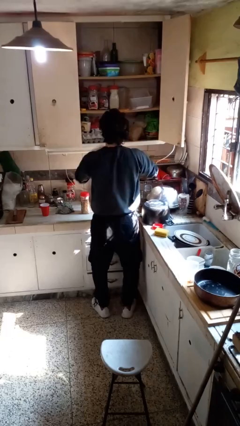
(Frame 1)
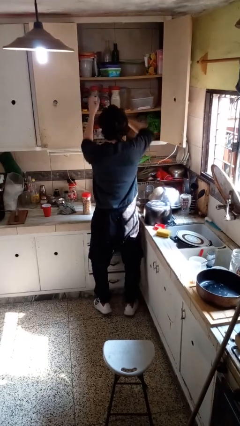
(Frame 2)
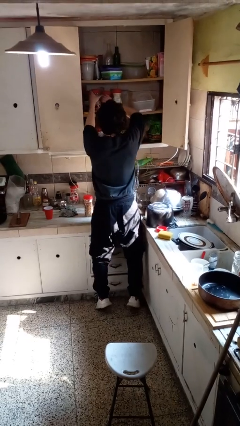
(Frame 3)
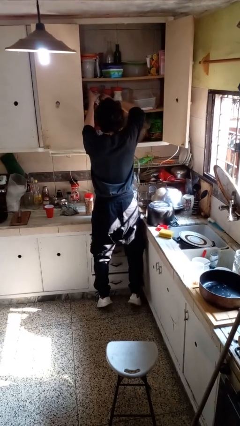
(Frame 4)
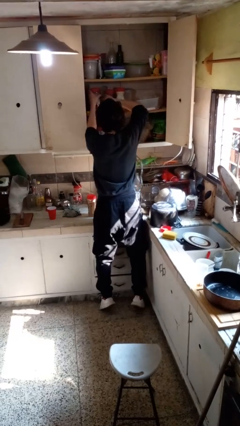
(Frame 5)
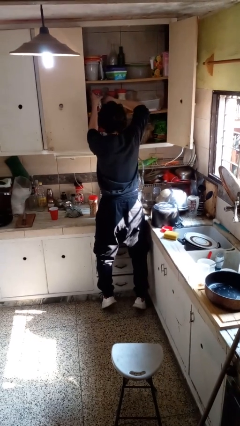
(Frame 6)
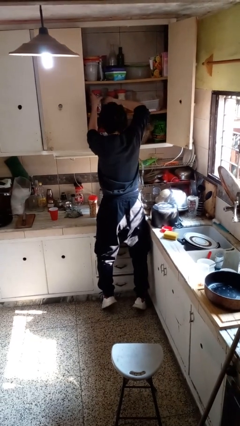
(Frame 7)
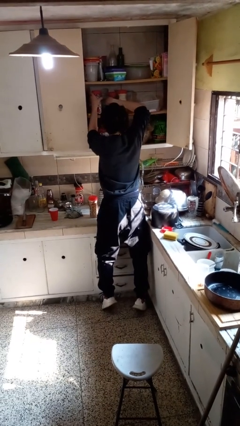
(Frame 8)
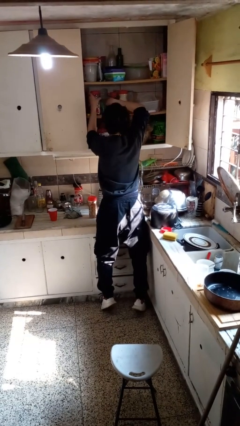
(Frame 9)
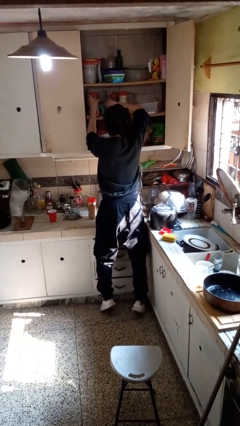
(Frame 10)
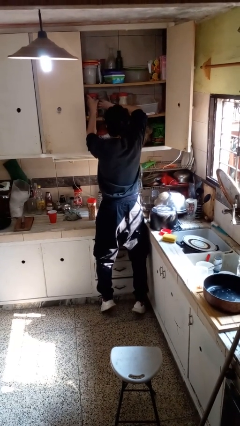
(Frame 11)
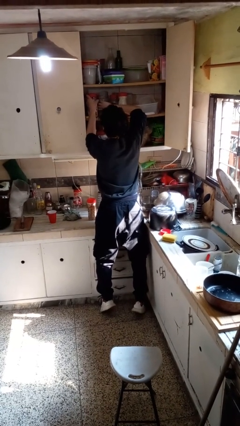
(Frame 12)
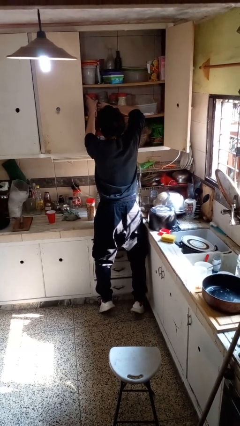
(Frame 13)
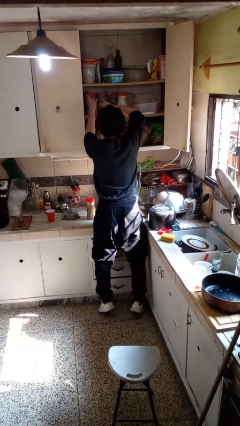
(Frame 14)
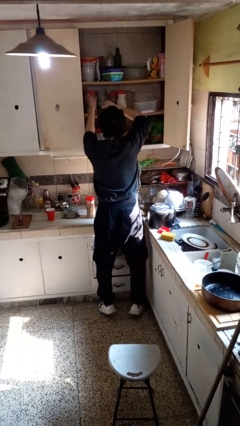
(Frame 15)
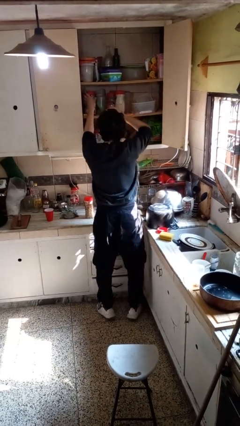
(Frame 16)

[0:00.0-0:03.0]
person searches in cabinet

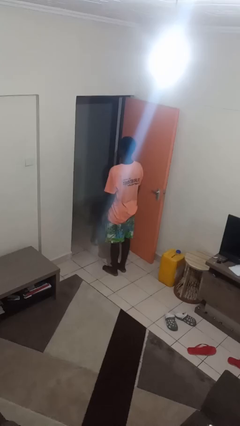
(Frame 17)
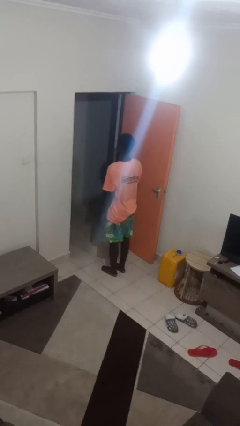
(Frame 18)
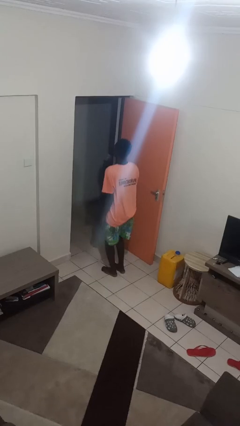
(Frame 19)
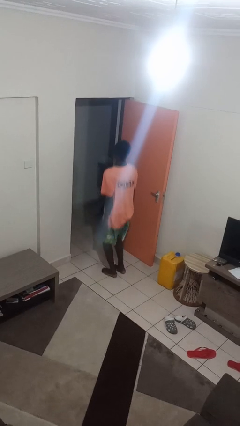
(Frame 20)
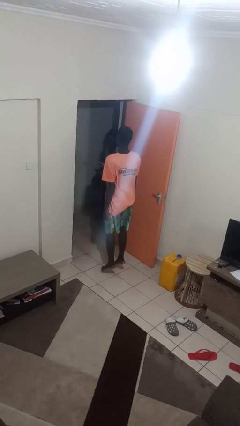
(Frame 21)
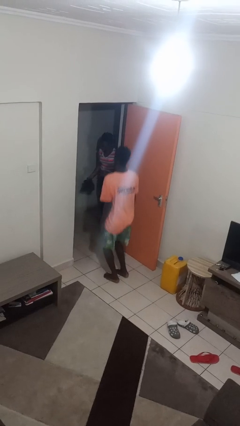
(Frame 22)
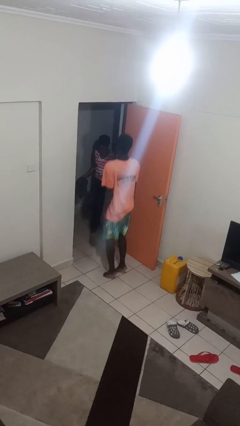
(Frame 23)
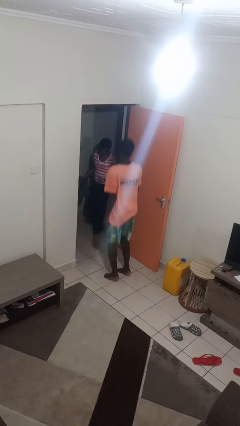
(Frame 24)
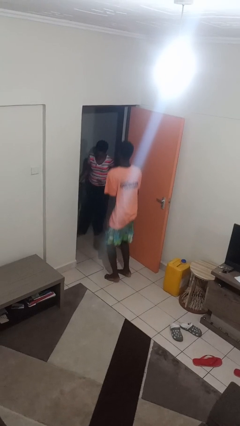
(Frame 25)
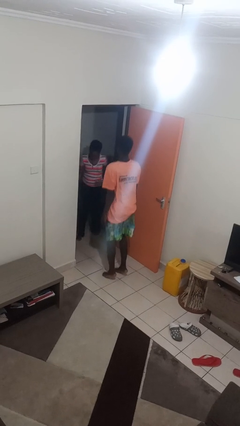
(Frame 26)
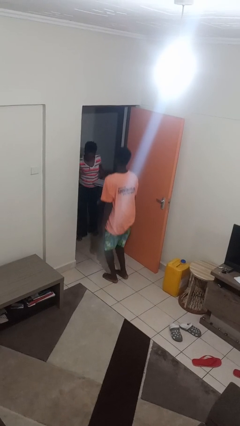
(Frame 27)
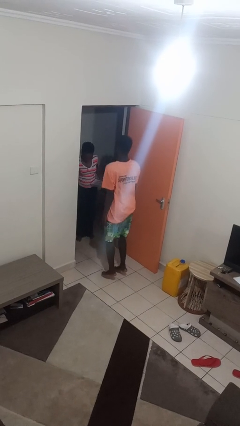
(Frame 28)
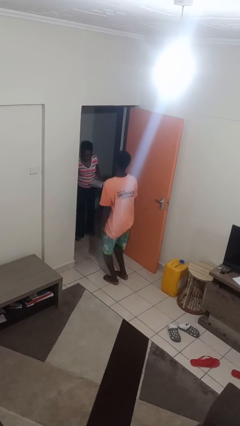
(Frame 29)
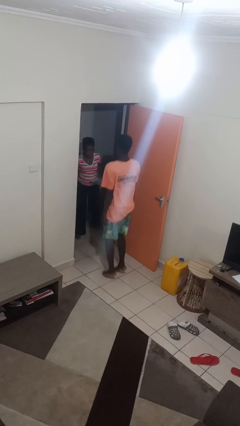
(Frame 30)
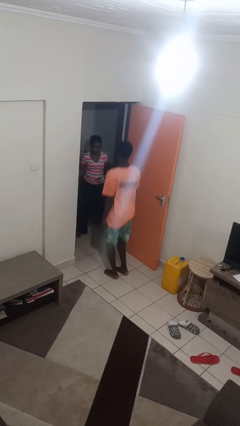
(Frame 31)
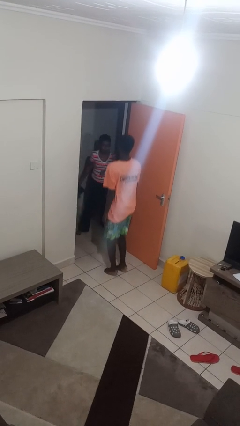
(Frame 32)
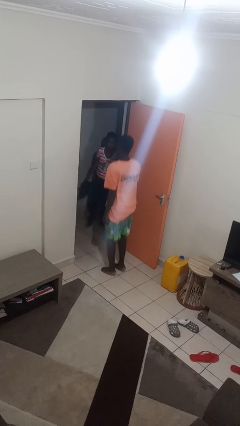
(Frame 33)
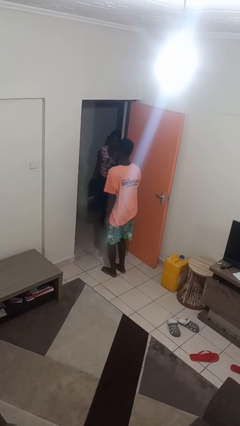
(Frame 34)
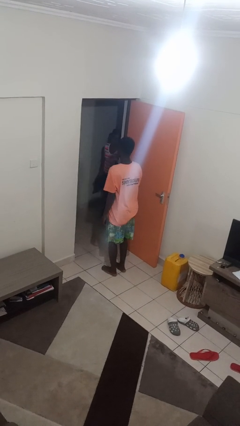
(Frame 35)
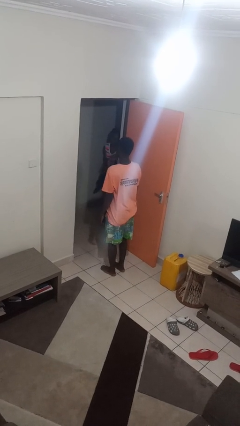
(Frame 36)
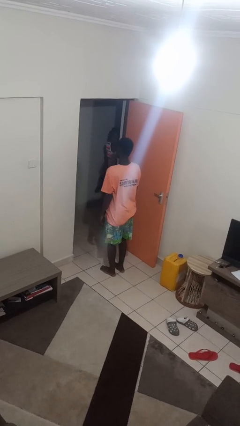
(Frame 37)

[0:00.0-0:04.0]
person jumps

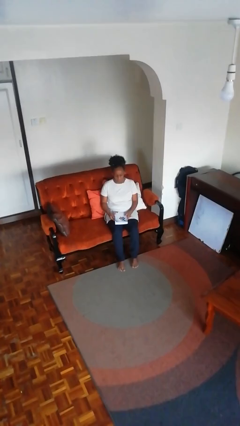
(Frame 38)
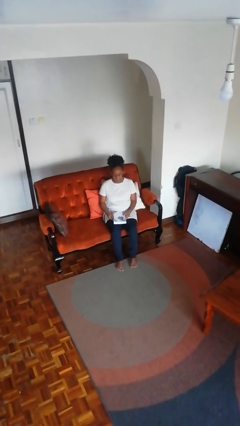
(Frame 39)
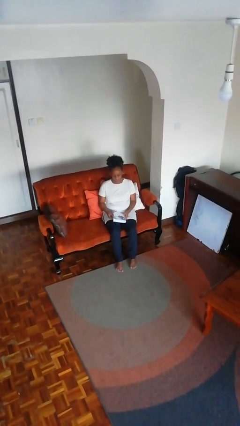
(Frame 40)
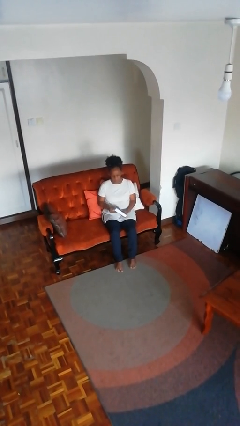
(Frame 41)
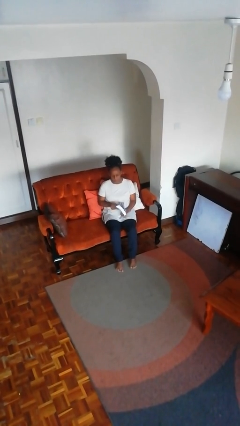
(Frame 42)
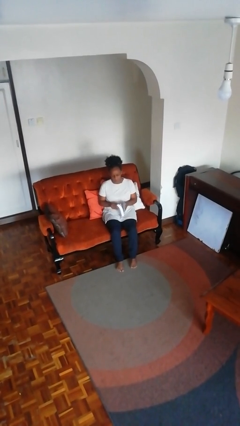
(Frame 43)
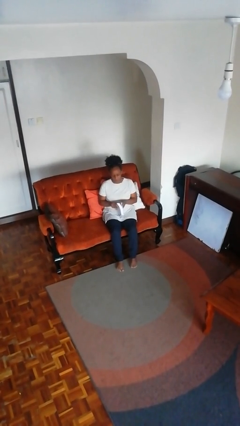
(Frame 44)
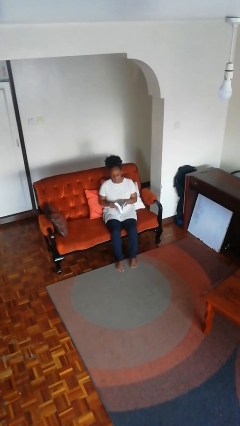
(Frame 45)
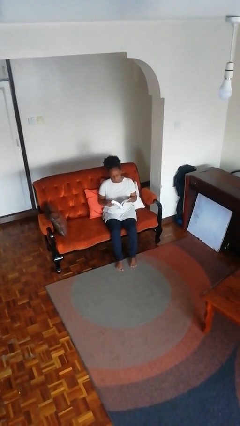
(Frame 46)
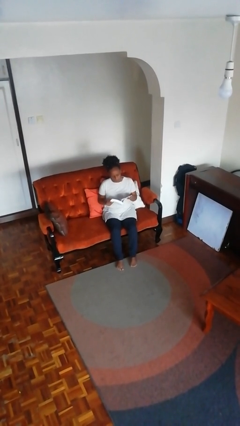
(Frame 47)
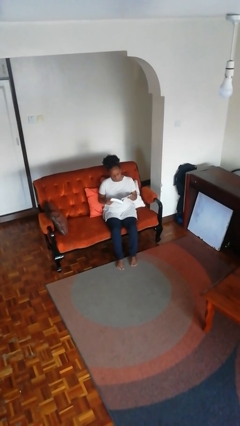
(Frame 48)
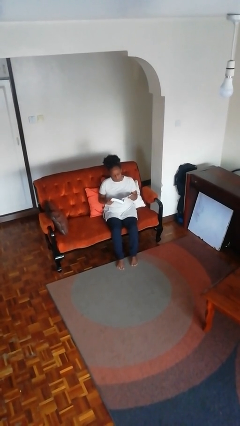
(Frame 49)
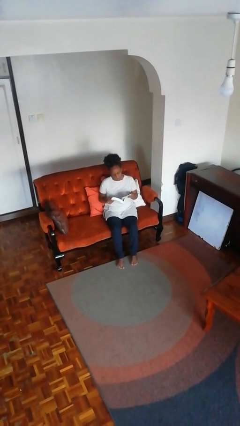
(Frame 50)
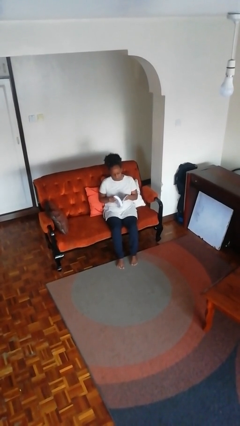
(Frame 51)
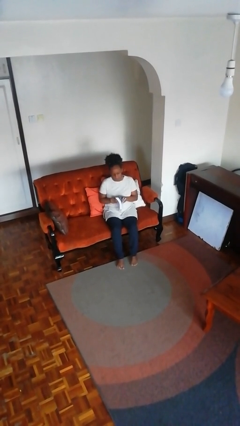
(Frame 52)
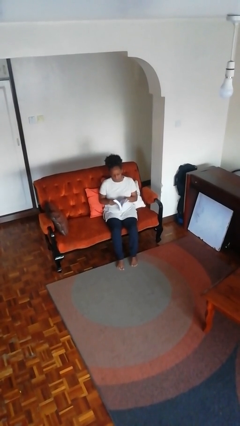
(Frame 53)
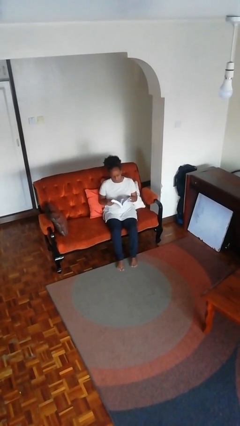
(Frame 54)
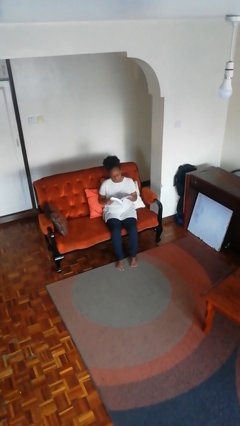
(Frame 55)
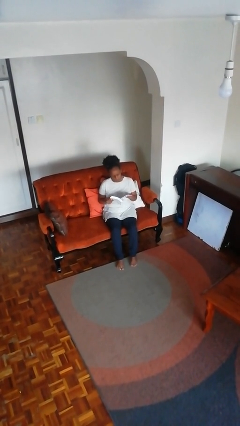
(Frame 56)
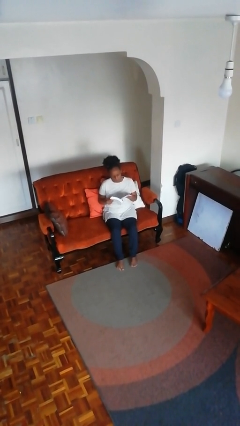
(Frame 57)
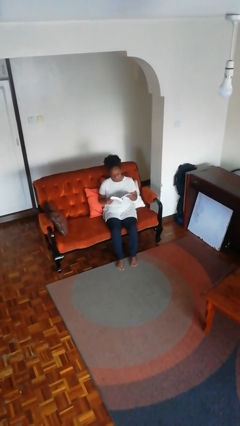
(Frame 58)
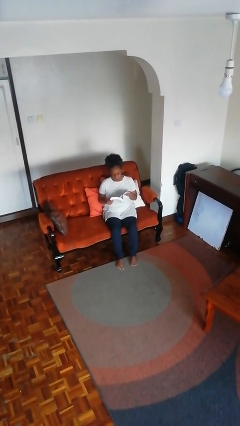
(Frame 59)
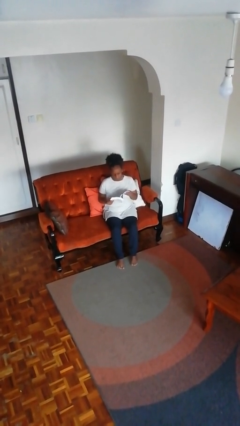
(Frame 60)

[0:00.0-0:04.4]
person reads book

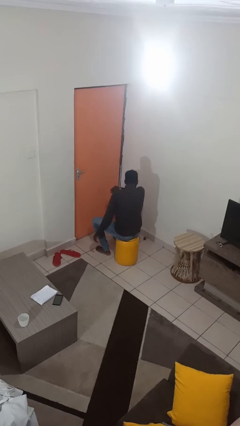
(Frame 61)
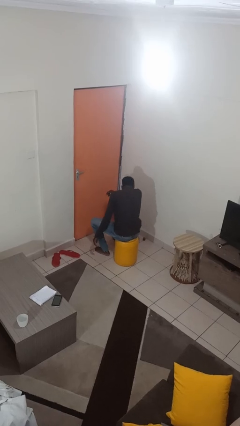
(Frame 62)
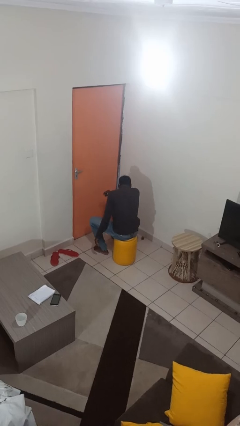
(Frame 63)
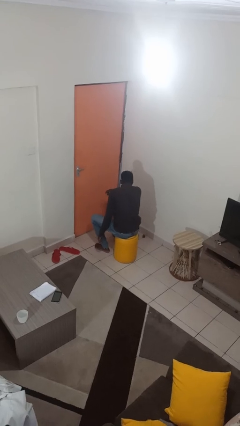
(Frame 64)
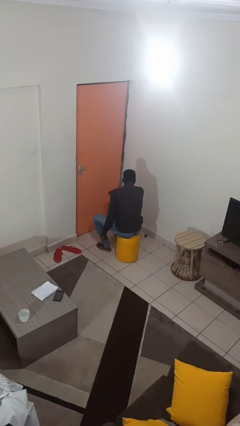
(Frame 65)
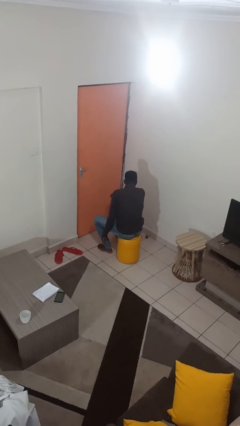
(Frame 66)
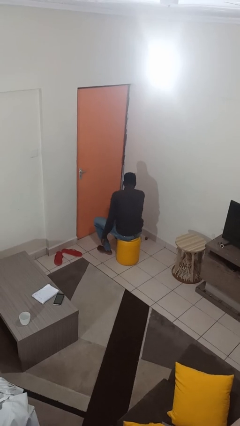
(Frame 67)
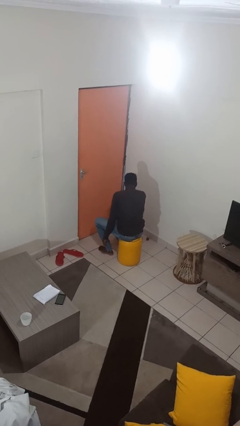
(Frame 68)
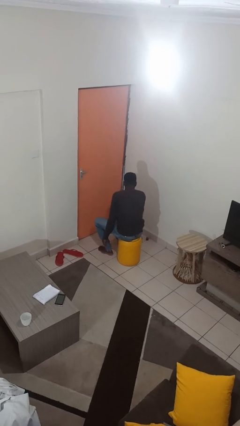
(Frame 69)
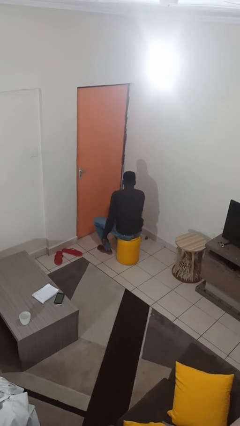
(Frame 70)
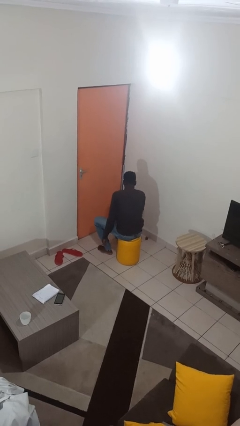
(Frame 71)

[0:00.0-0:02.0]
person sneezes into arm

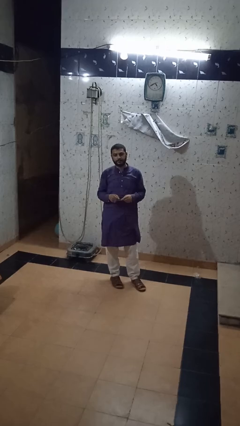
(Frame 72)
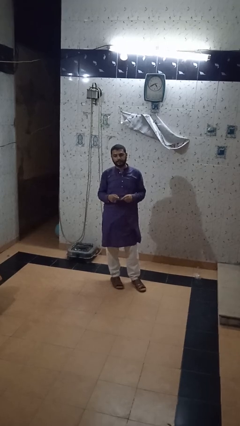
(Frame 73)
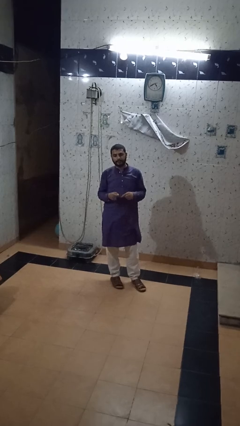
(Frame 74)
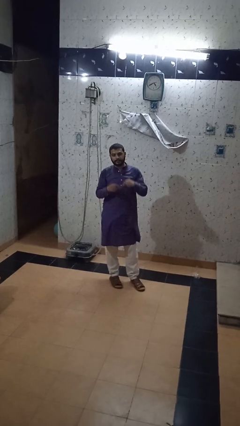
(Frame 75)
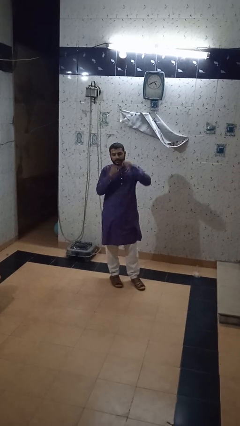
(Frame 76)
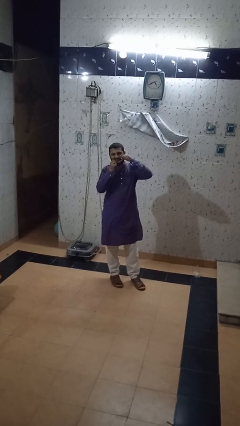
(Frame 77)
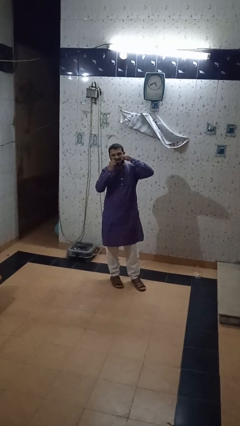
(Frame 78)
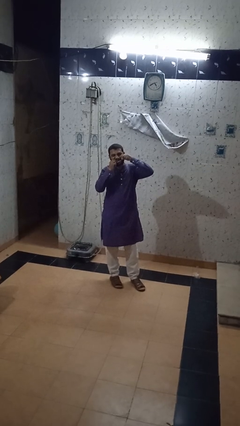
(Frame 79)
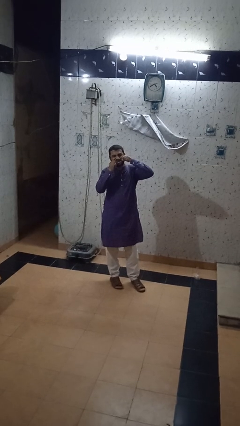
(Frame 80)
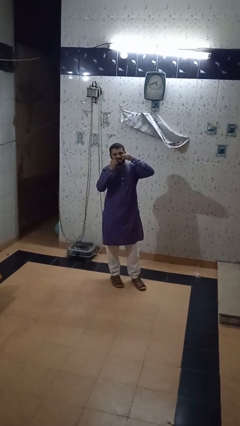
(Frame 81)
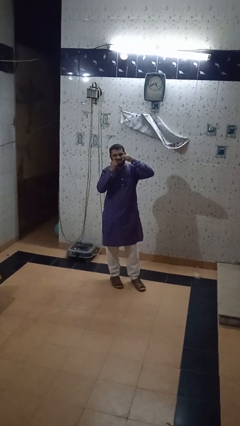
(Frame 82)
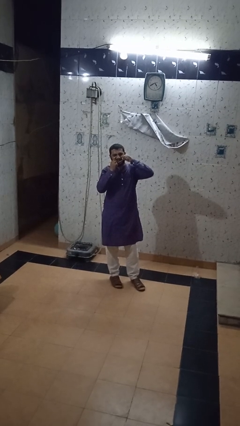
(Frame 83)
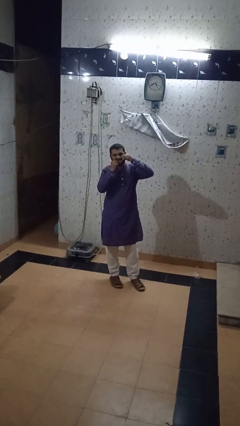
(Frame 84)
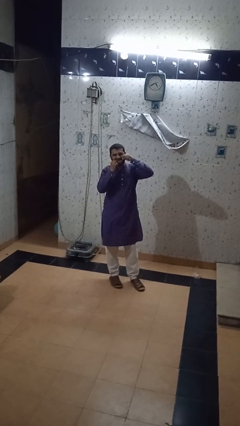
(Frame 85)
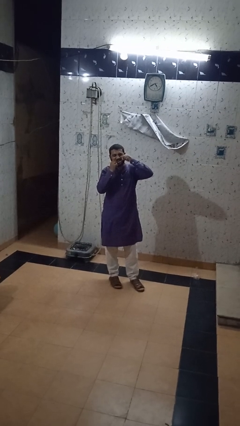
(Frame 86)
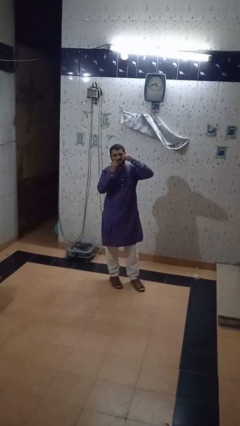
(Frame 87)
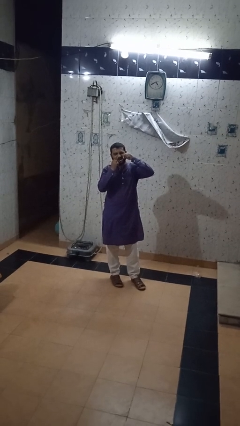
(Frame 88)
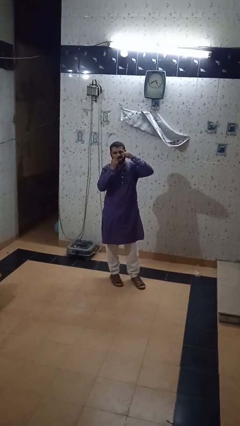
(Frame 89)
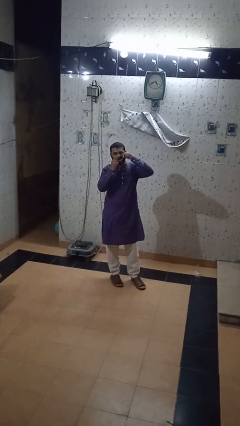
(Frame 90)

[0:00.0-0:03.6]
person flosses

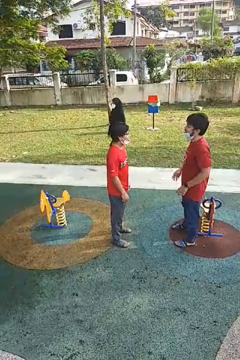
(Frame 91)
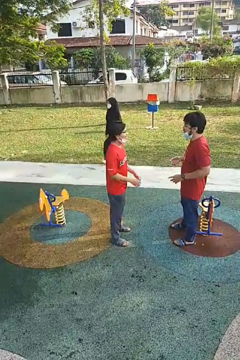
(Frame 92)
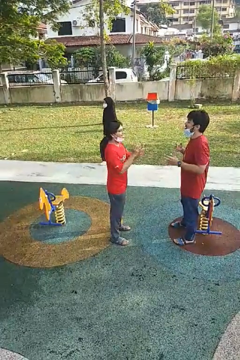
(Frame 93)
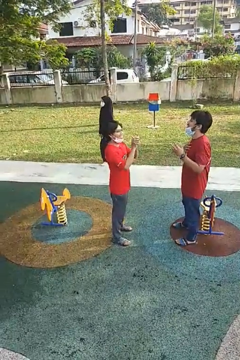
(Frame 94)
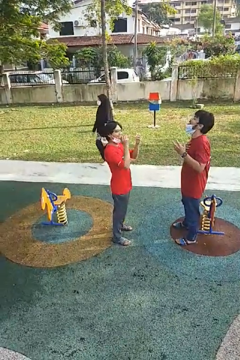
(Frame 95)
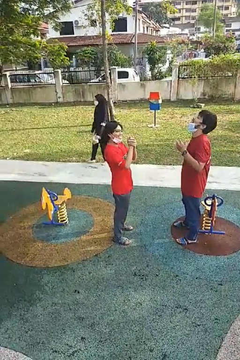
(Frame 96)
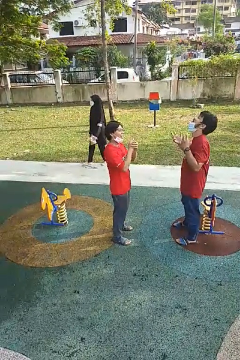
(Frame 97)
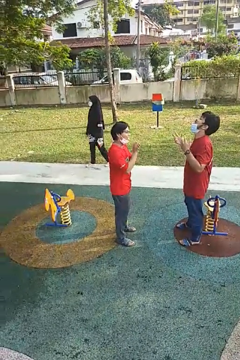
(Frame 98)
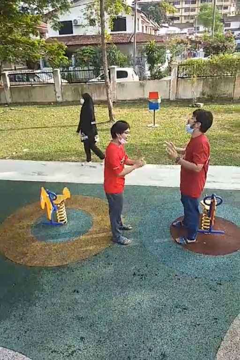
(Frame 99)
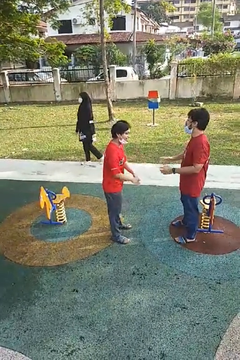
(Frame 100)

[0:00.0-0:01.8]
person laughs with person
